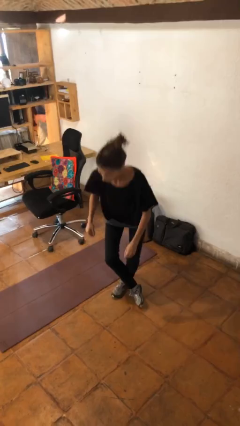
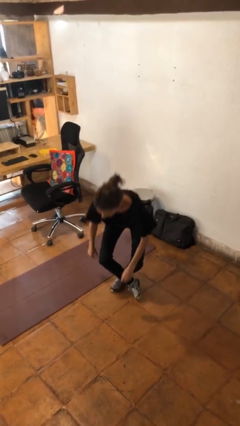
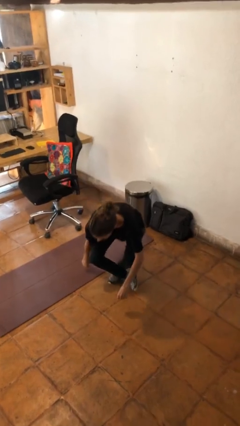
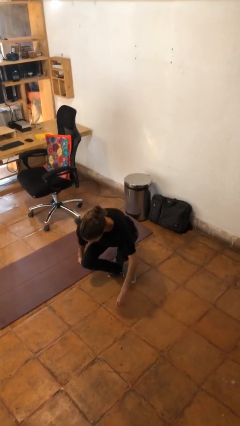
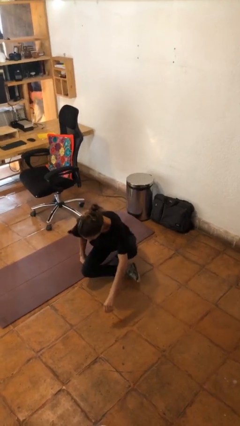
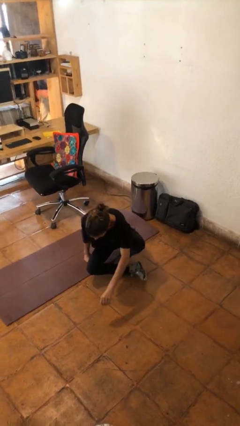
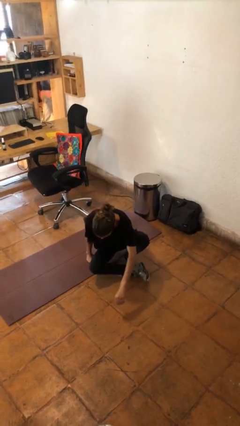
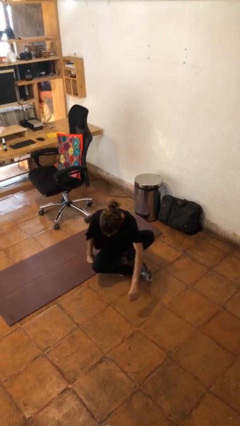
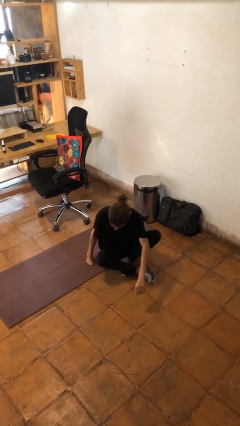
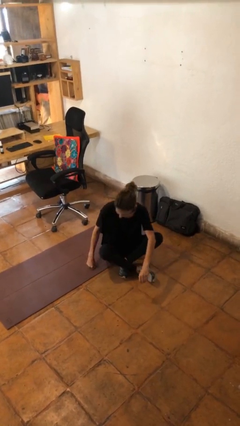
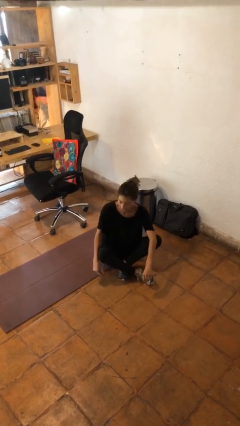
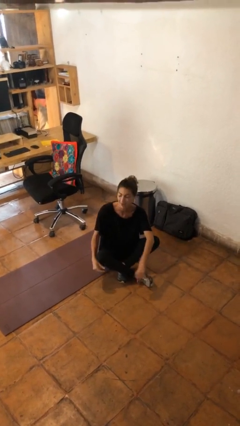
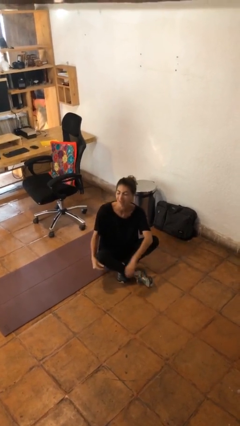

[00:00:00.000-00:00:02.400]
person sits crisscross

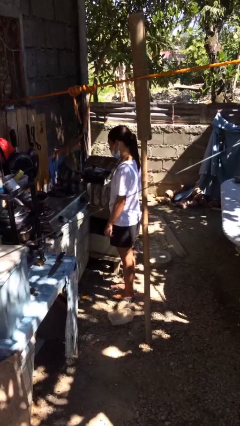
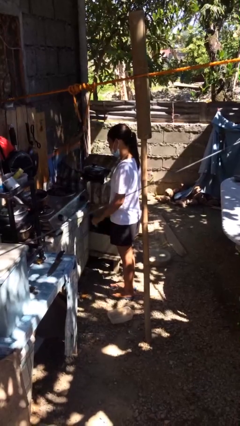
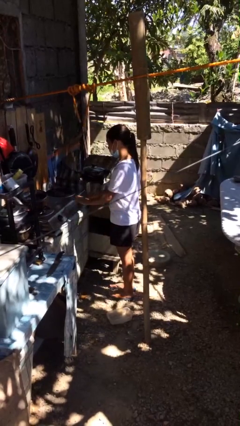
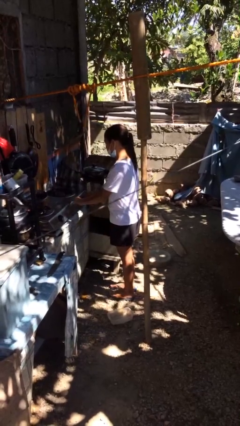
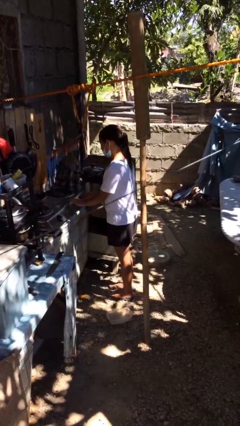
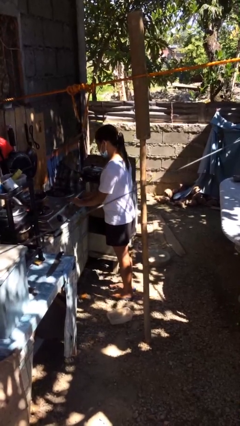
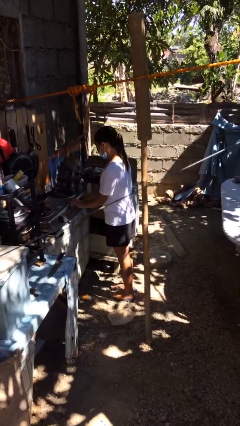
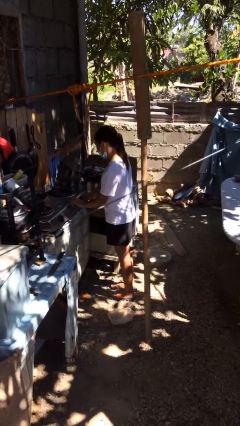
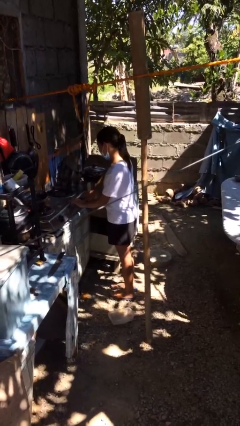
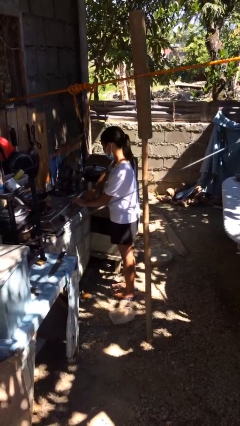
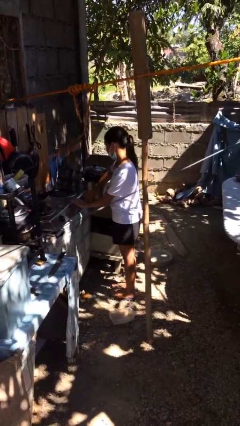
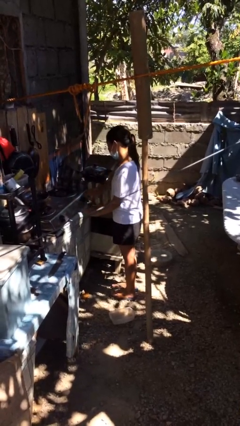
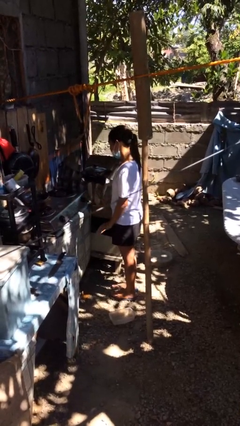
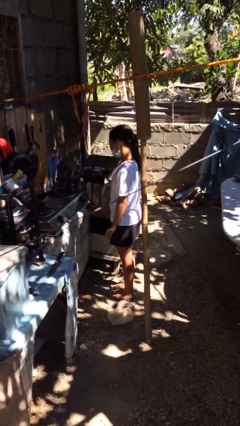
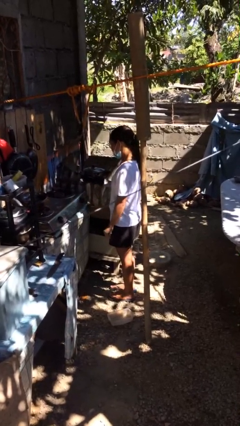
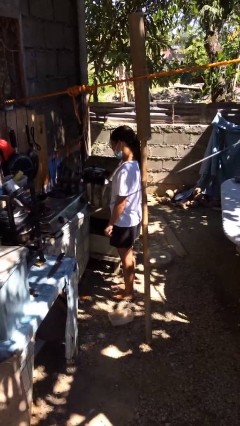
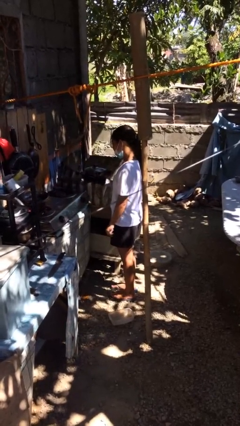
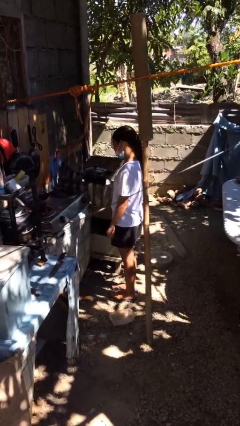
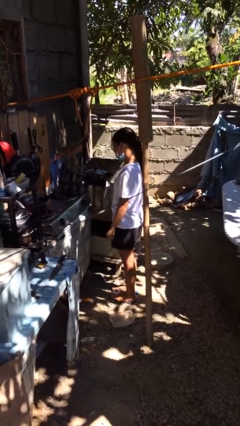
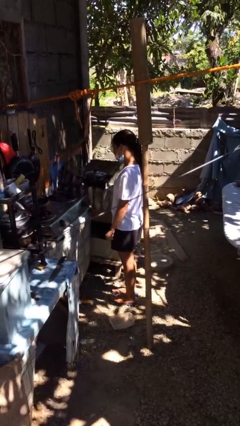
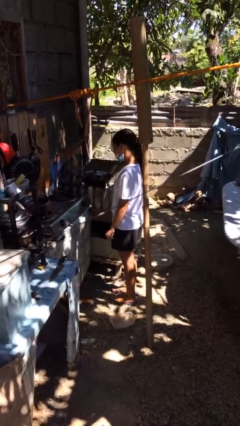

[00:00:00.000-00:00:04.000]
person turns on stovetop

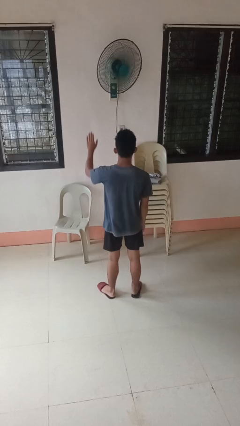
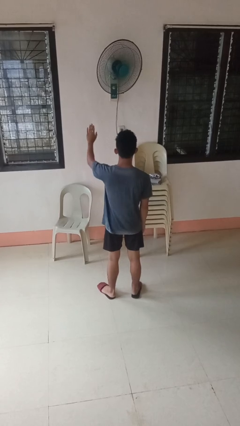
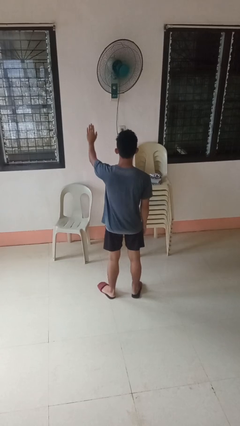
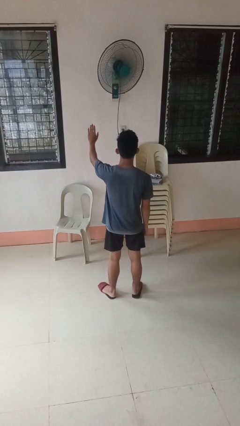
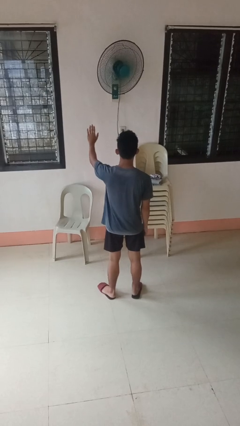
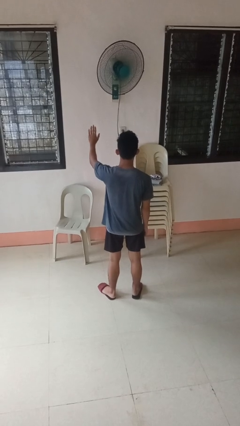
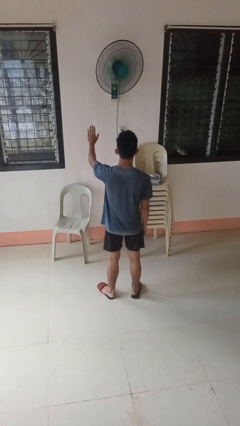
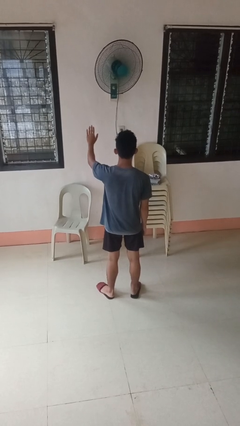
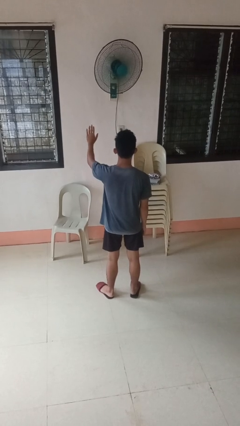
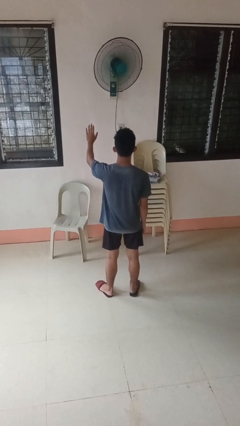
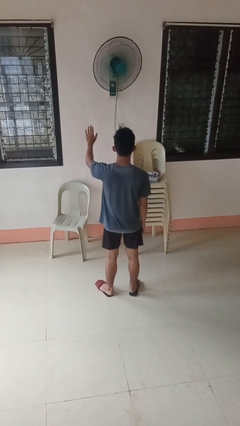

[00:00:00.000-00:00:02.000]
person gestures stop

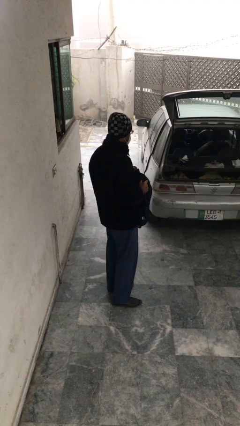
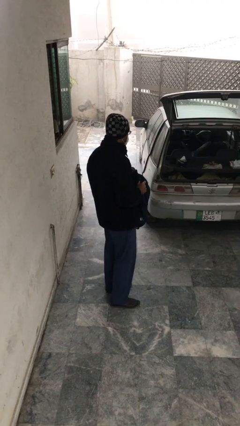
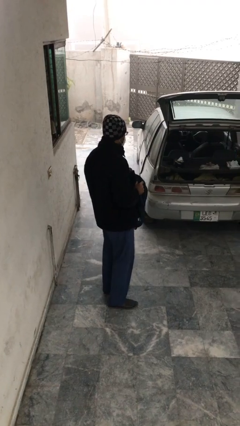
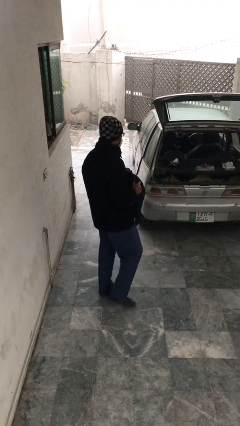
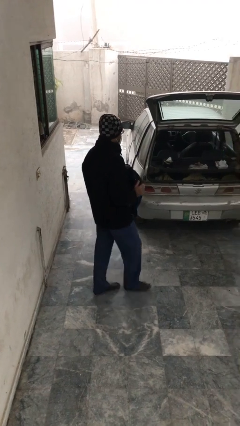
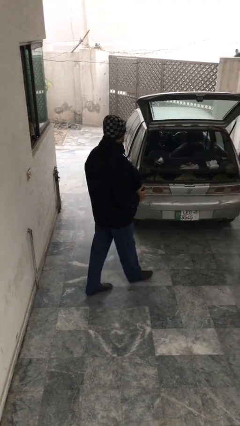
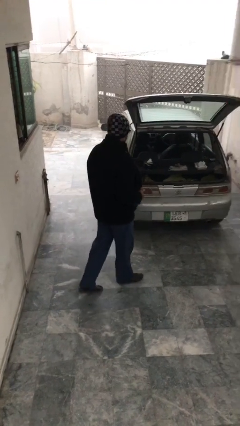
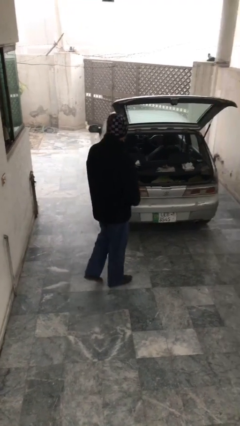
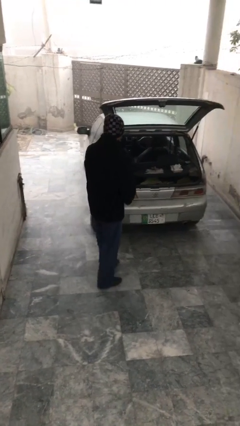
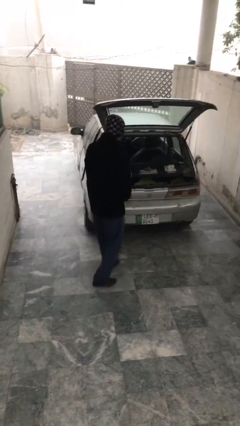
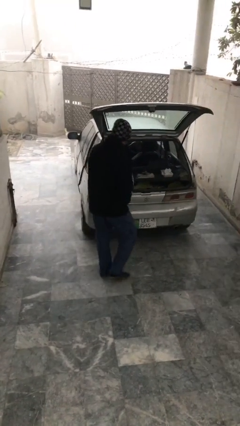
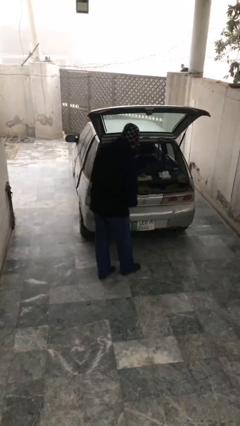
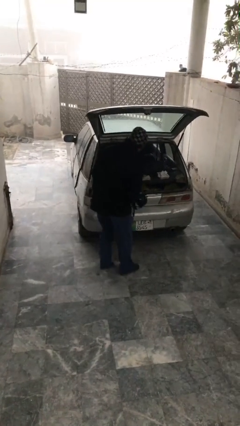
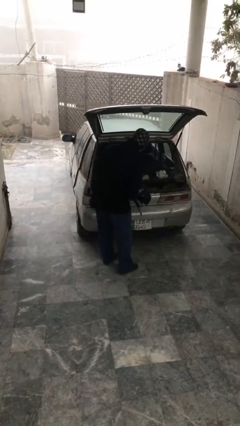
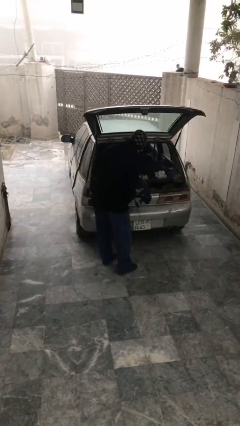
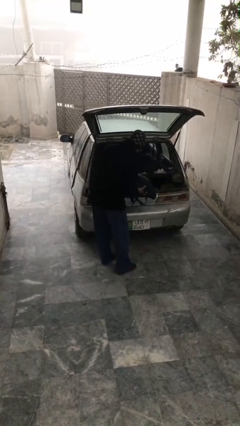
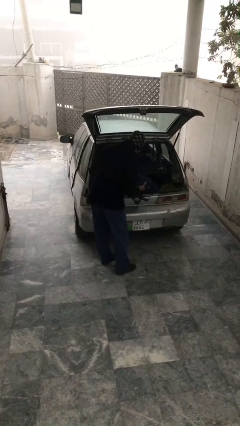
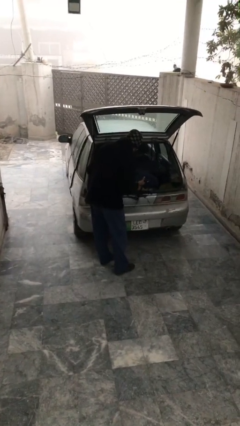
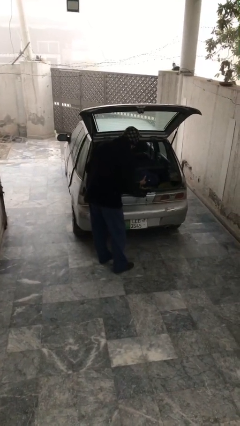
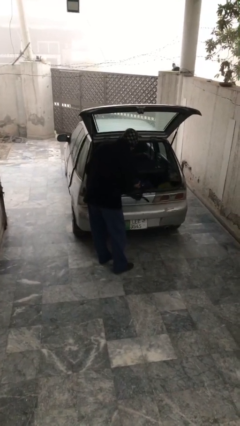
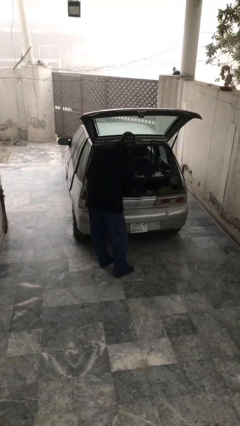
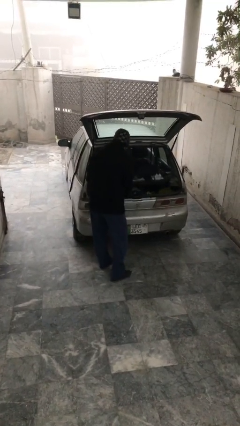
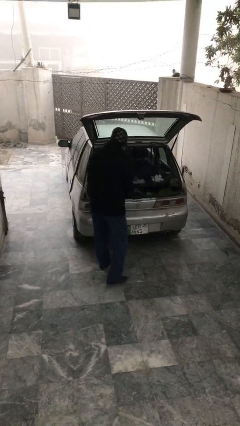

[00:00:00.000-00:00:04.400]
person loads car

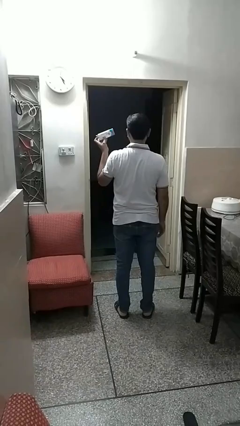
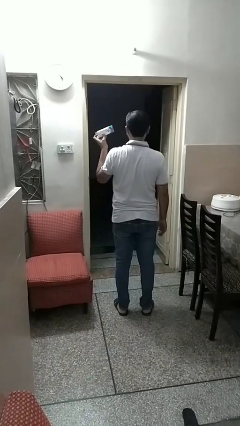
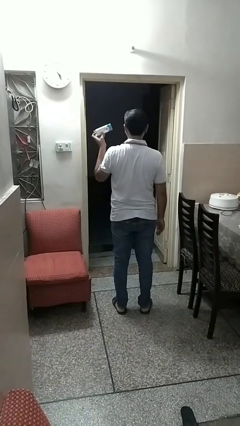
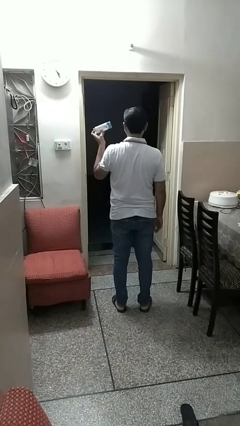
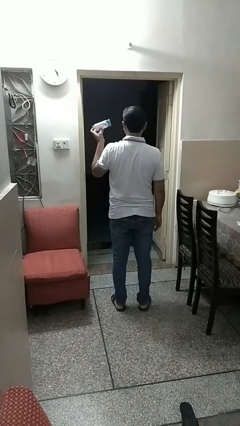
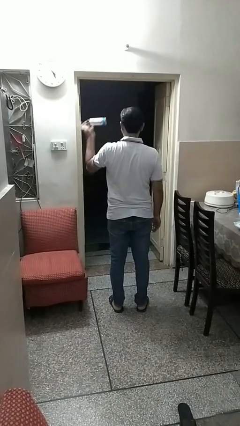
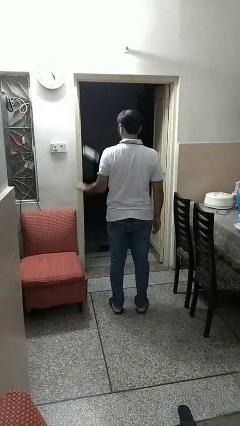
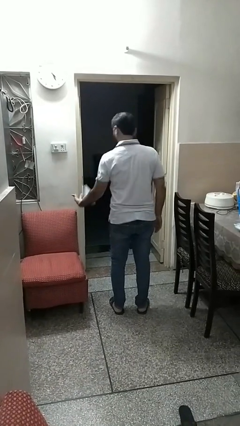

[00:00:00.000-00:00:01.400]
person drops object

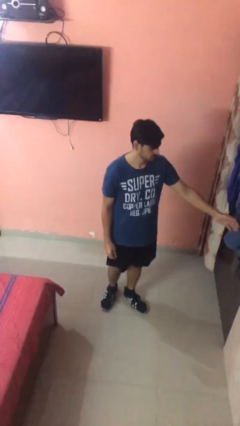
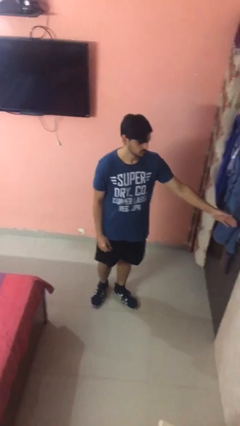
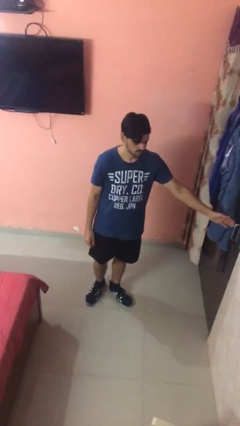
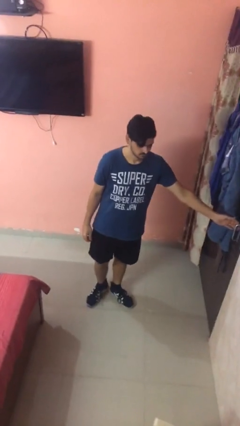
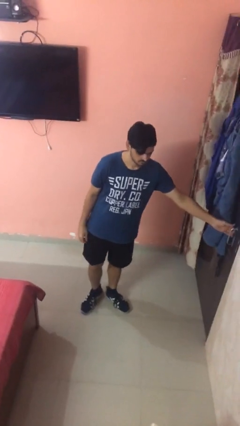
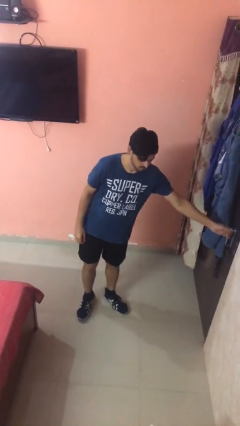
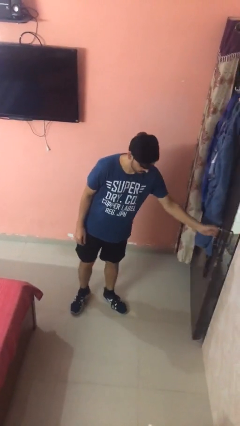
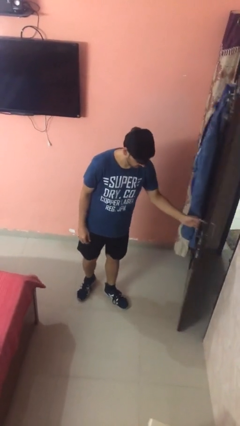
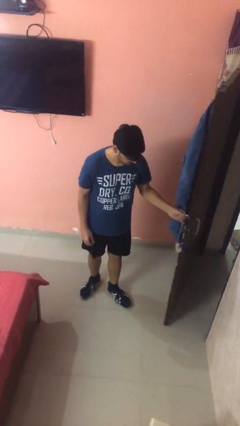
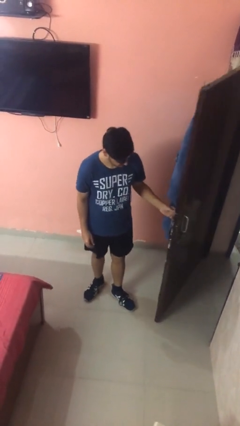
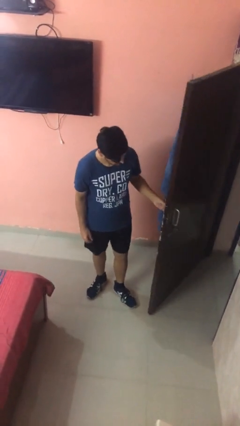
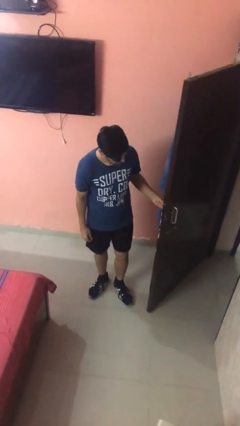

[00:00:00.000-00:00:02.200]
person opens facility door

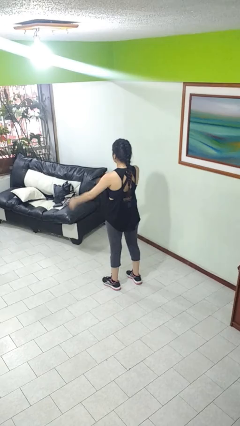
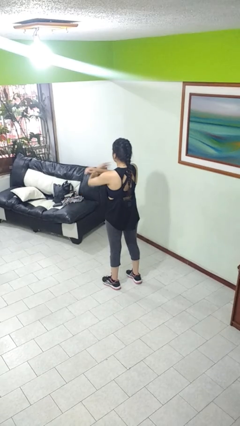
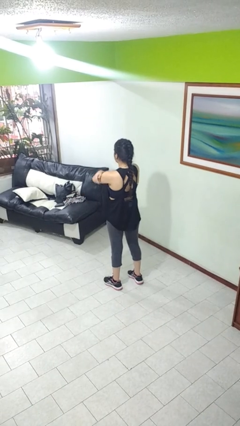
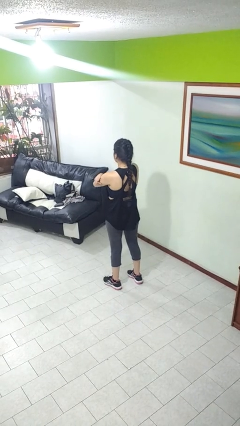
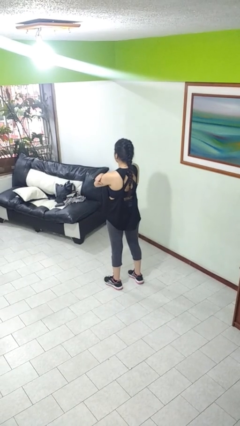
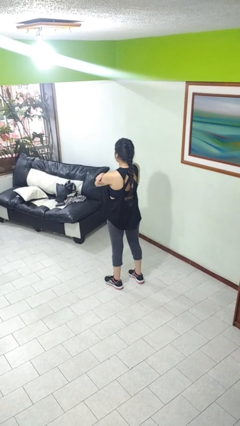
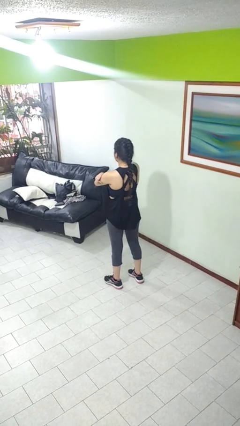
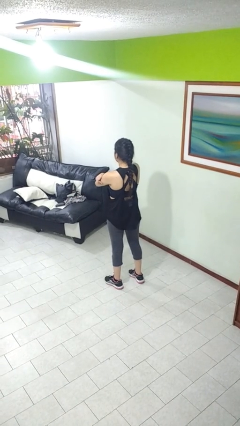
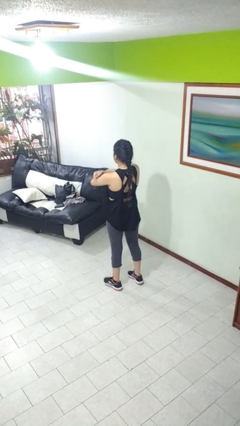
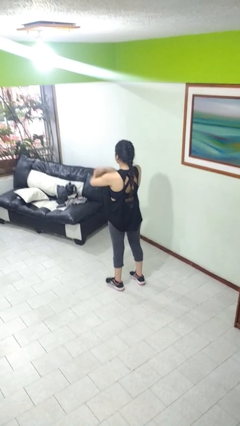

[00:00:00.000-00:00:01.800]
person crosses arms
